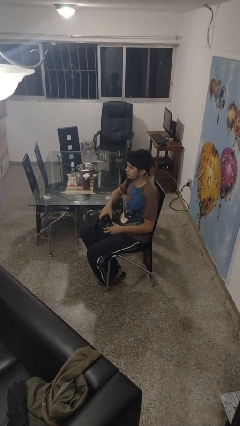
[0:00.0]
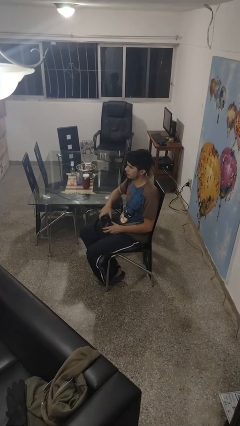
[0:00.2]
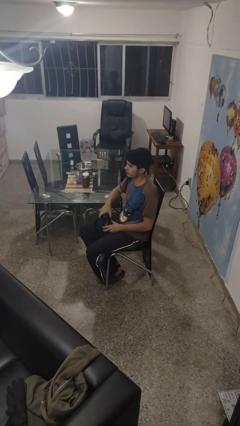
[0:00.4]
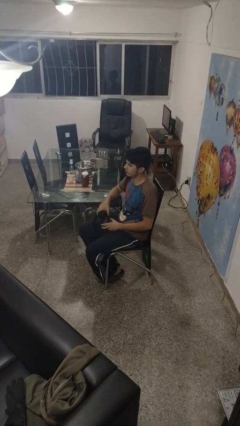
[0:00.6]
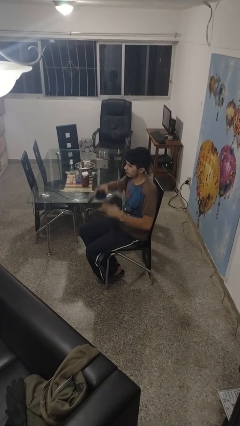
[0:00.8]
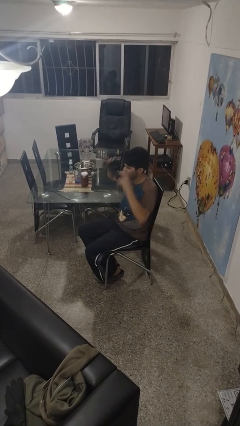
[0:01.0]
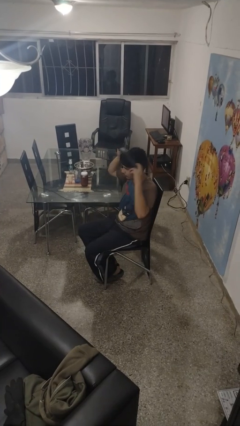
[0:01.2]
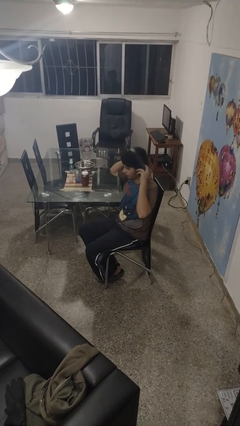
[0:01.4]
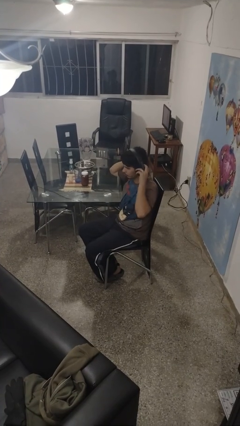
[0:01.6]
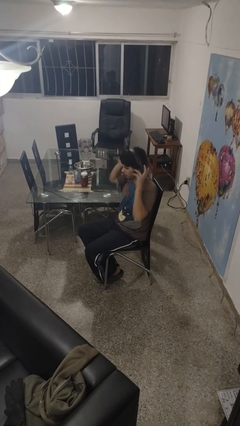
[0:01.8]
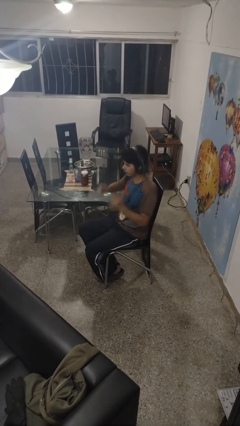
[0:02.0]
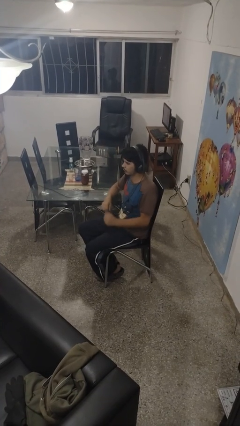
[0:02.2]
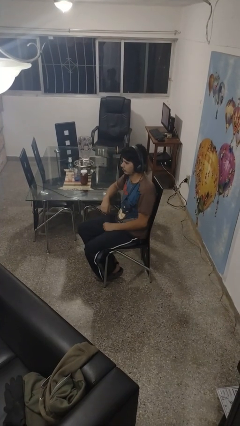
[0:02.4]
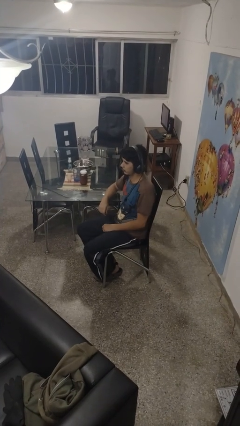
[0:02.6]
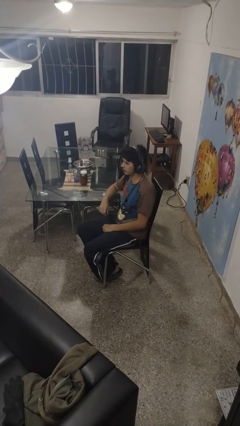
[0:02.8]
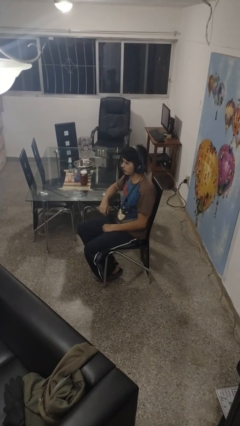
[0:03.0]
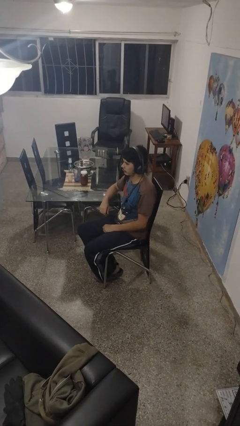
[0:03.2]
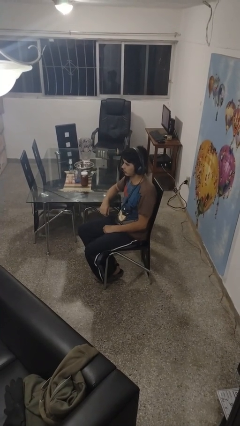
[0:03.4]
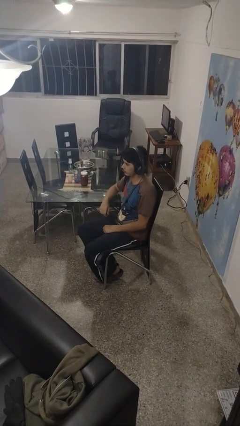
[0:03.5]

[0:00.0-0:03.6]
person puts on headphones

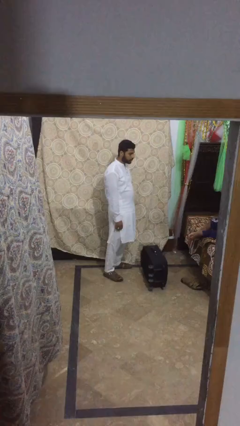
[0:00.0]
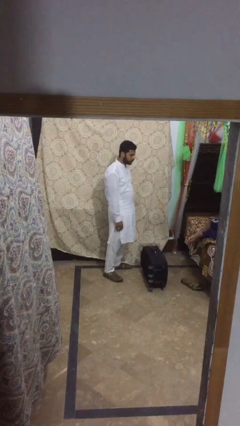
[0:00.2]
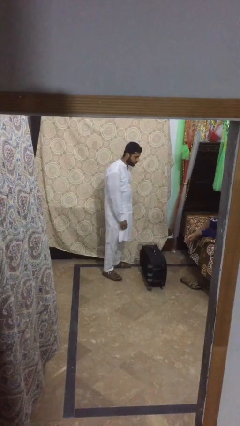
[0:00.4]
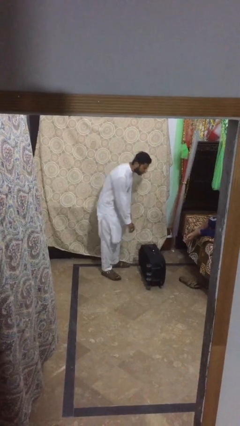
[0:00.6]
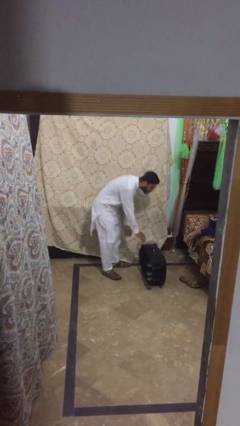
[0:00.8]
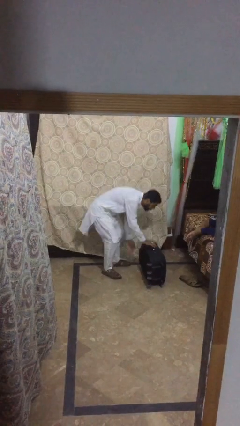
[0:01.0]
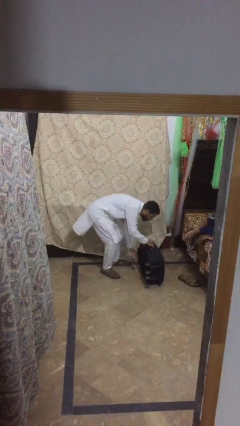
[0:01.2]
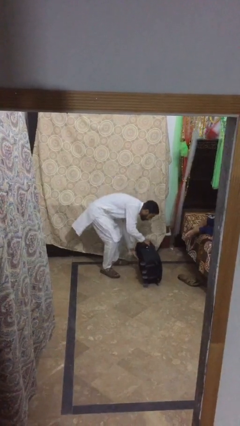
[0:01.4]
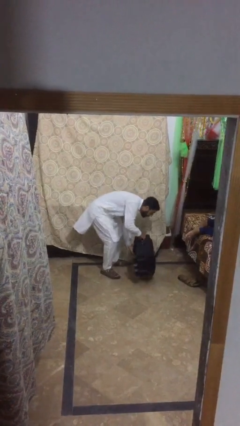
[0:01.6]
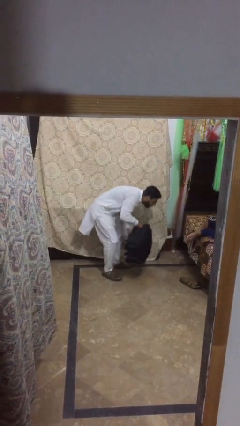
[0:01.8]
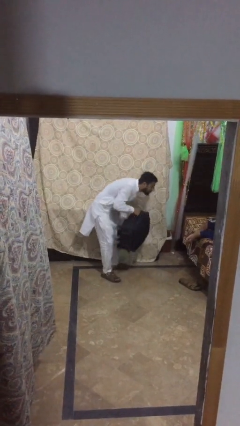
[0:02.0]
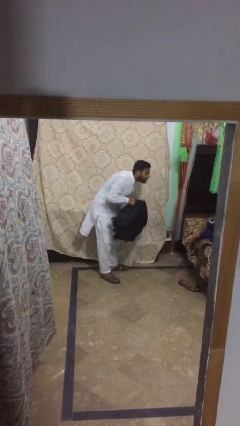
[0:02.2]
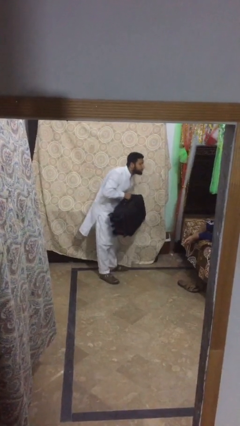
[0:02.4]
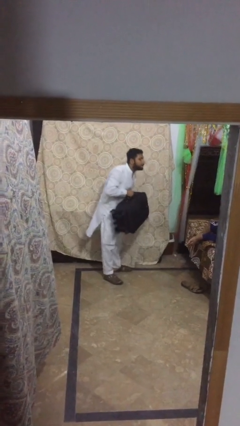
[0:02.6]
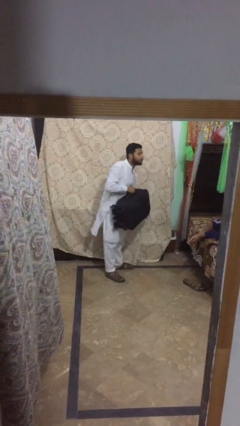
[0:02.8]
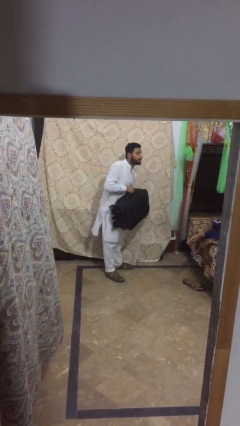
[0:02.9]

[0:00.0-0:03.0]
person picks up object from floor

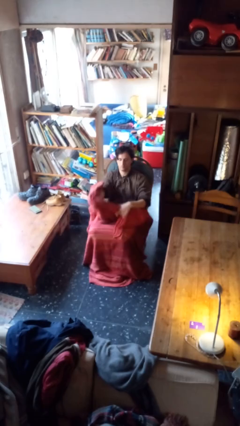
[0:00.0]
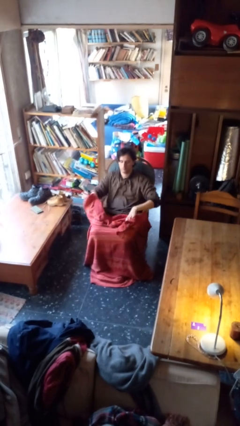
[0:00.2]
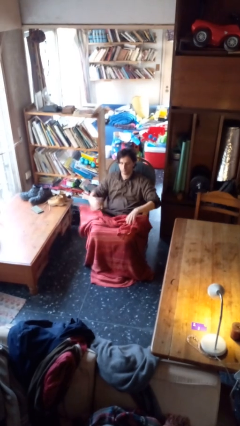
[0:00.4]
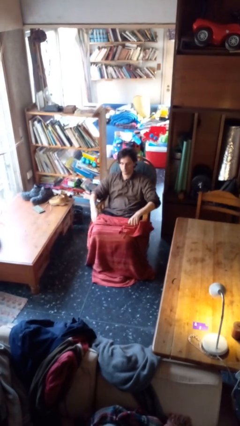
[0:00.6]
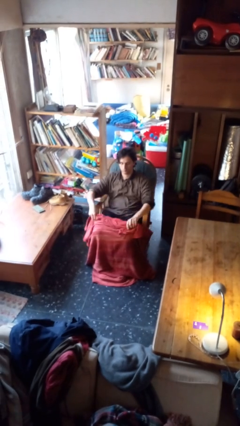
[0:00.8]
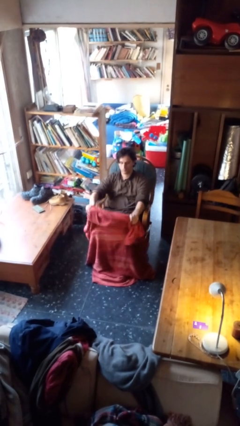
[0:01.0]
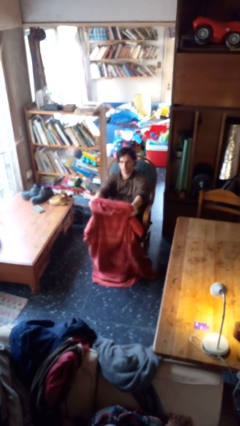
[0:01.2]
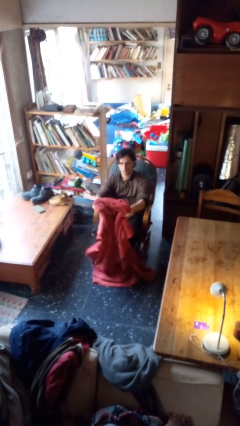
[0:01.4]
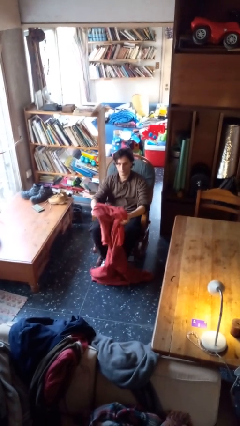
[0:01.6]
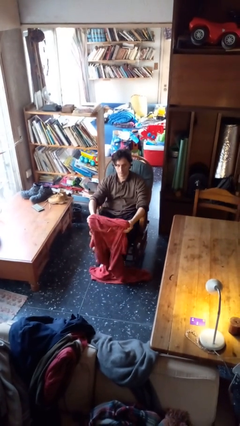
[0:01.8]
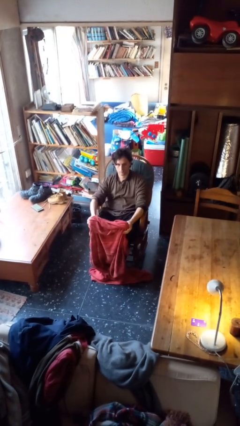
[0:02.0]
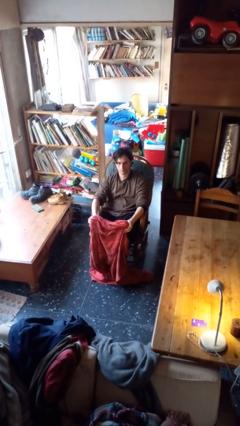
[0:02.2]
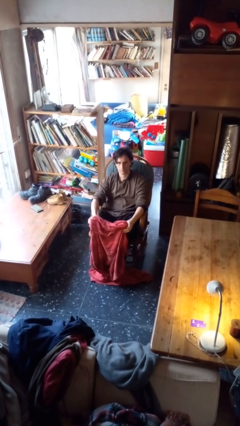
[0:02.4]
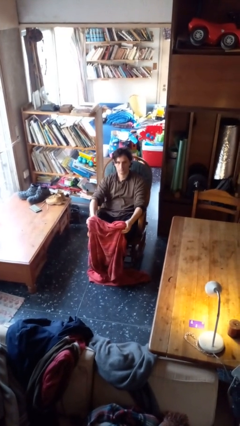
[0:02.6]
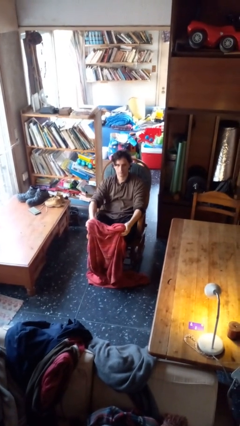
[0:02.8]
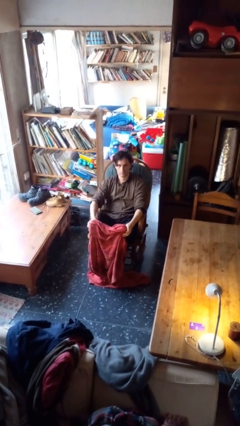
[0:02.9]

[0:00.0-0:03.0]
person uncovers with blanket

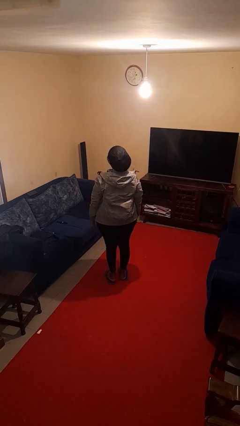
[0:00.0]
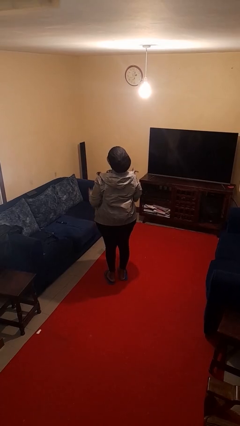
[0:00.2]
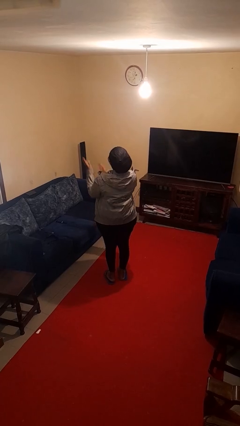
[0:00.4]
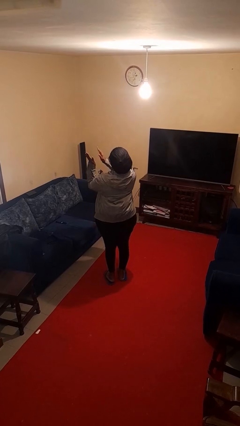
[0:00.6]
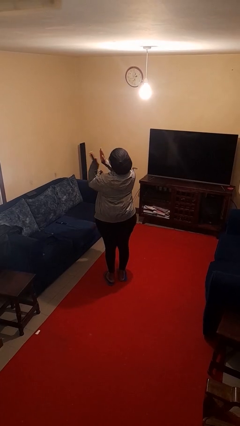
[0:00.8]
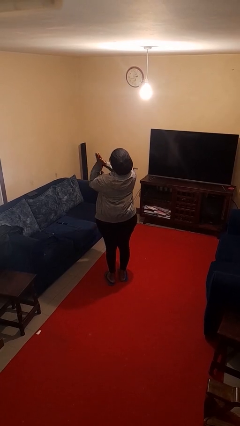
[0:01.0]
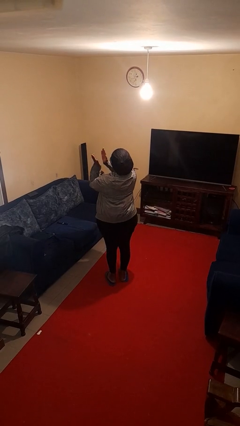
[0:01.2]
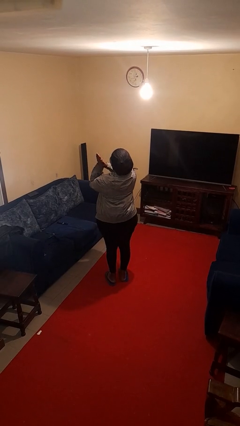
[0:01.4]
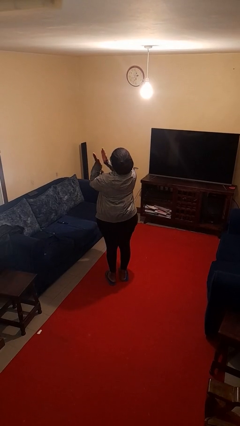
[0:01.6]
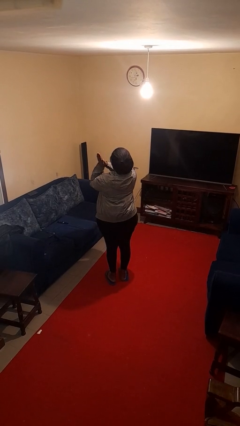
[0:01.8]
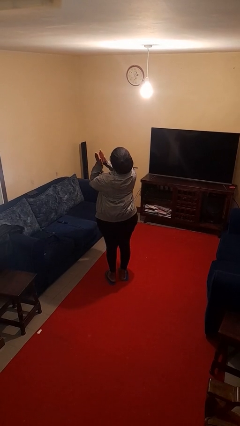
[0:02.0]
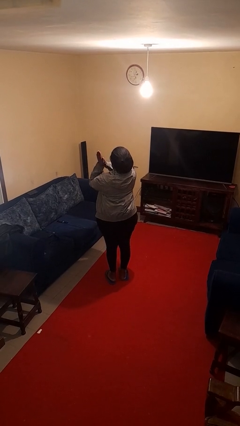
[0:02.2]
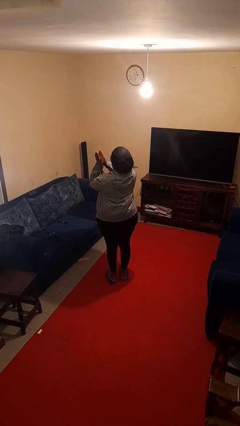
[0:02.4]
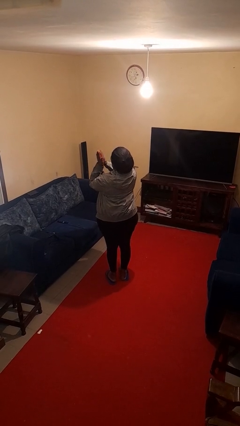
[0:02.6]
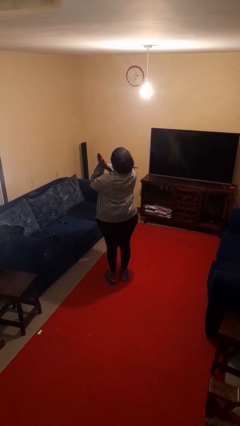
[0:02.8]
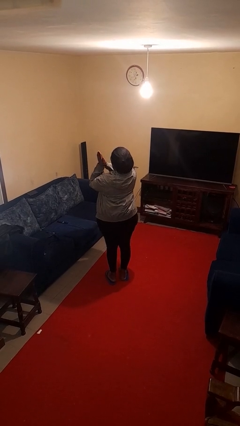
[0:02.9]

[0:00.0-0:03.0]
person claps hands

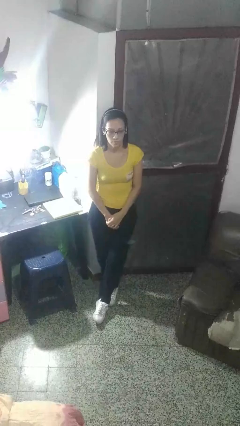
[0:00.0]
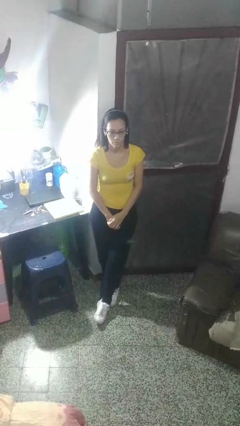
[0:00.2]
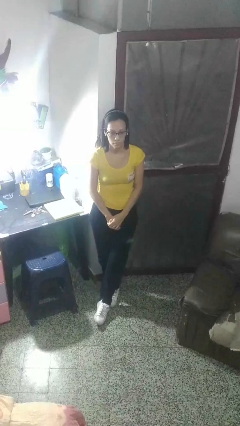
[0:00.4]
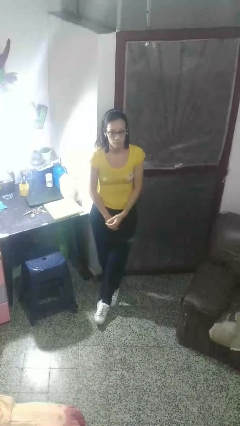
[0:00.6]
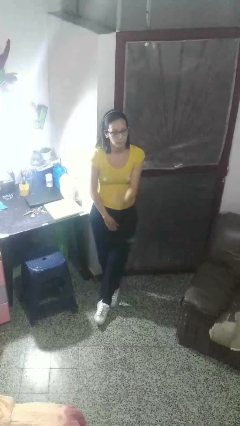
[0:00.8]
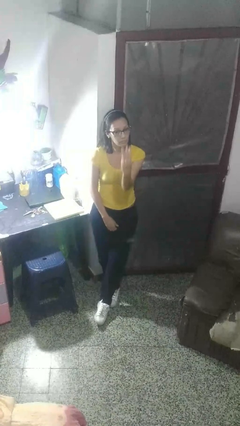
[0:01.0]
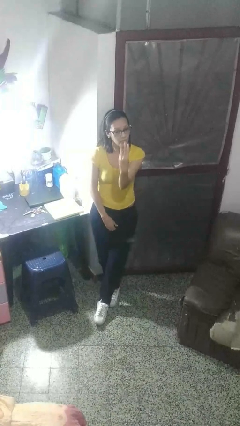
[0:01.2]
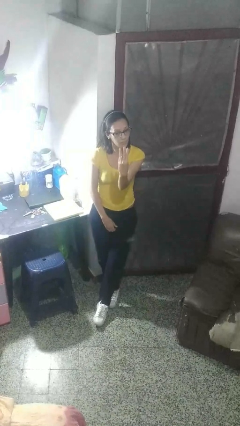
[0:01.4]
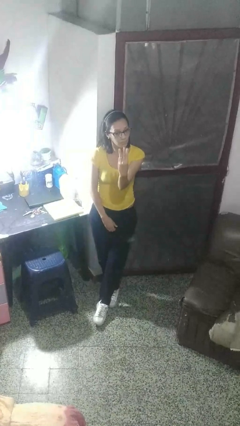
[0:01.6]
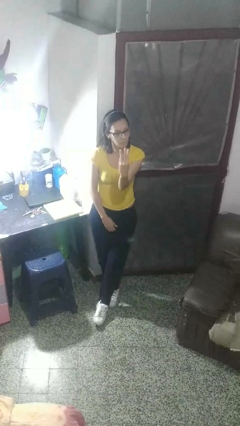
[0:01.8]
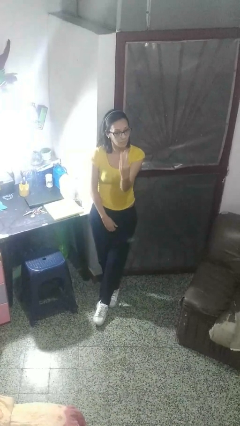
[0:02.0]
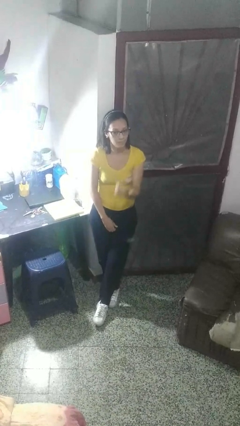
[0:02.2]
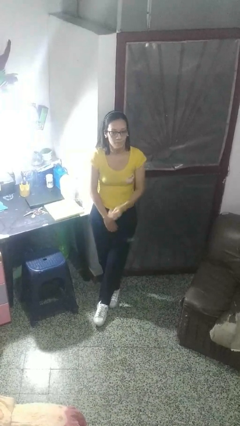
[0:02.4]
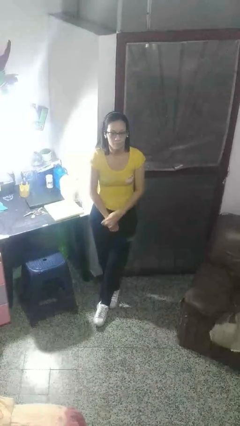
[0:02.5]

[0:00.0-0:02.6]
person gestures number three

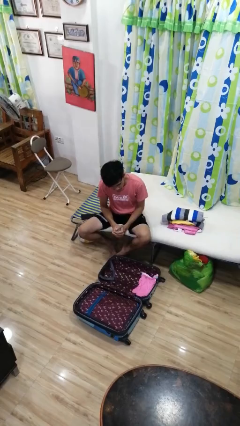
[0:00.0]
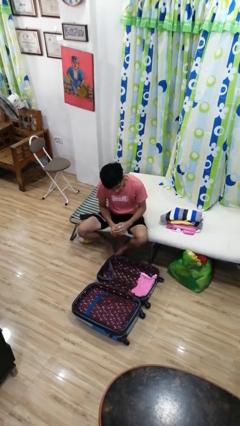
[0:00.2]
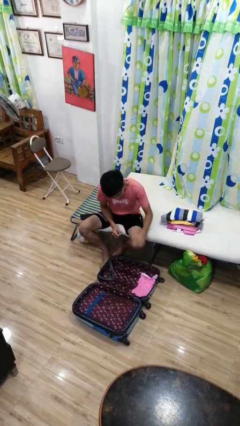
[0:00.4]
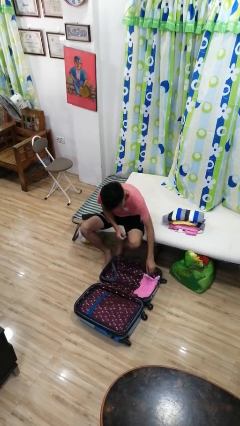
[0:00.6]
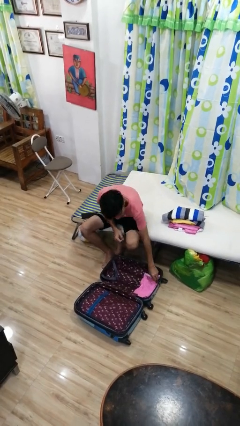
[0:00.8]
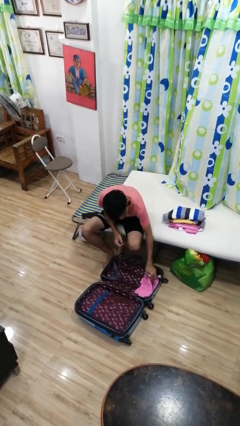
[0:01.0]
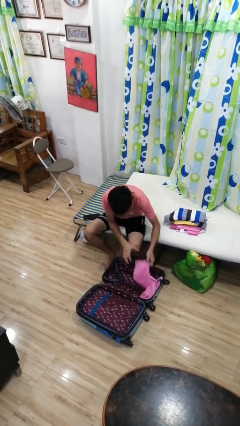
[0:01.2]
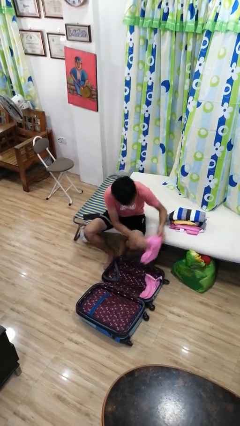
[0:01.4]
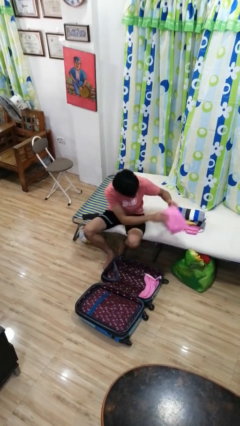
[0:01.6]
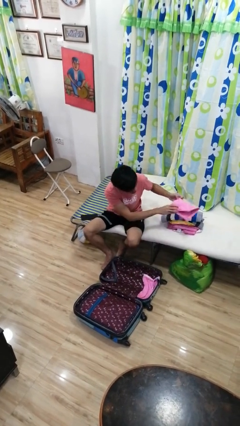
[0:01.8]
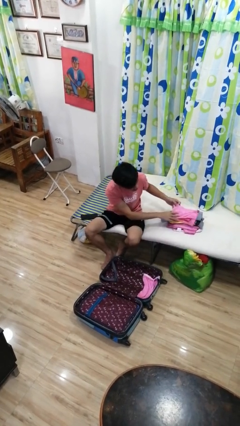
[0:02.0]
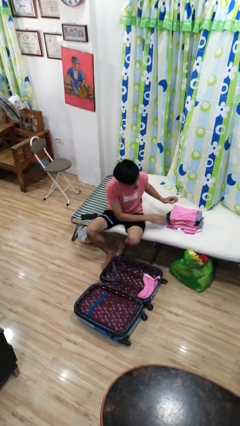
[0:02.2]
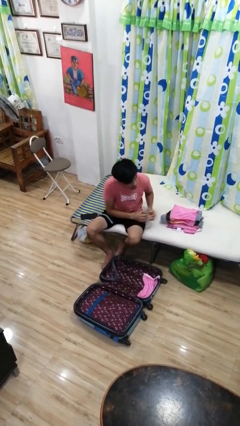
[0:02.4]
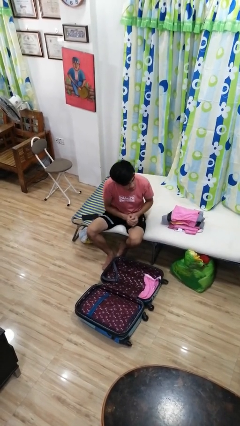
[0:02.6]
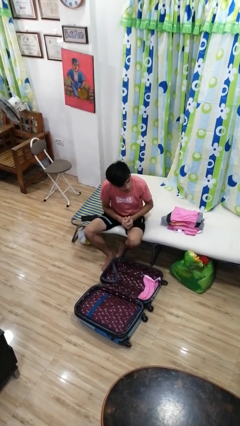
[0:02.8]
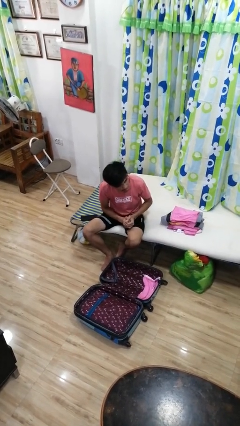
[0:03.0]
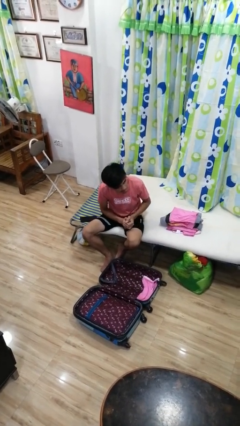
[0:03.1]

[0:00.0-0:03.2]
person unloads clothes from suitcase
